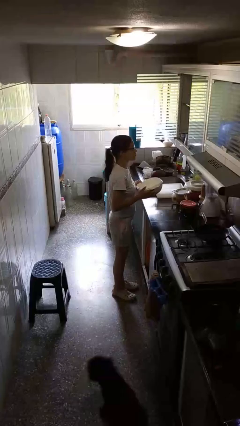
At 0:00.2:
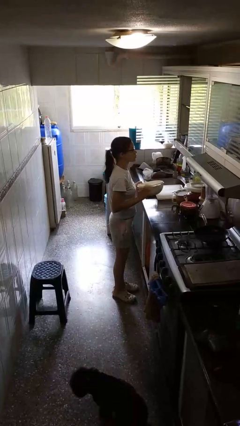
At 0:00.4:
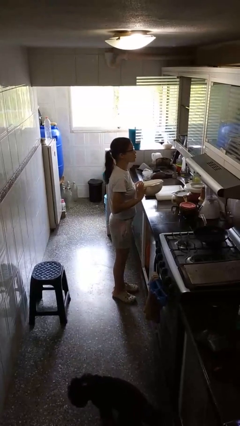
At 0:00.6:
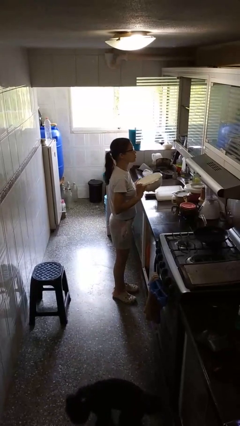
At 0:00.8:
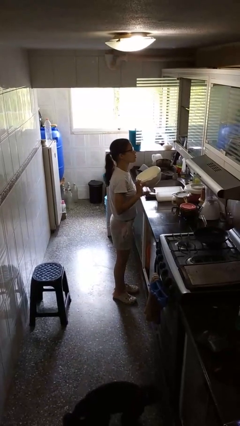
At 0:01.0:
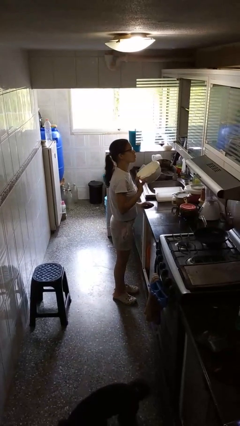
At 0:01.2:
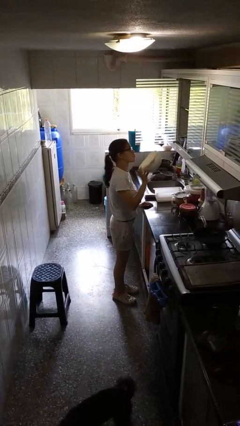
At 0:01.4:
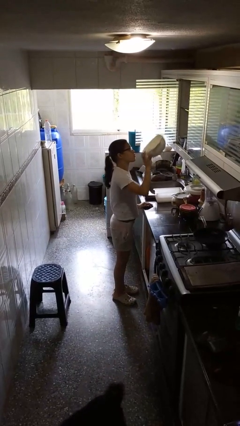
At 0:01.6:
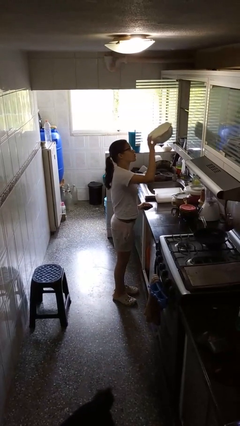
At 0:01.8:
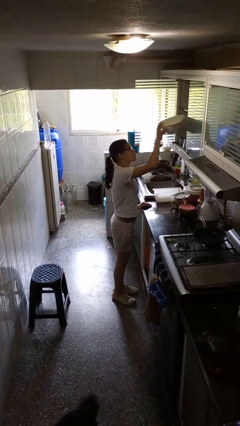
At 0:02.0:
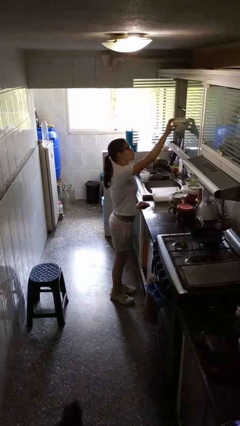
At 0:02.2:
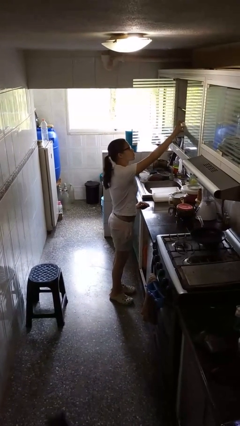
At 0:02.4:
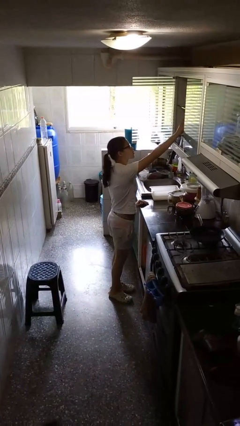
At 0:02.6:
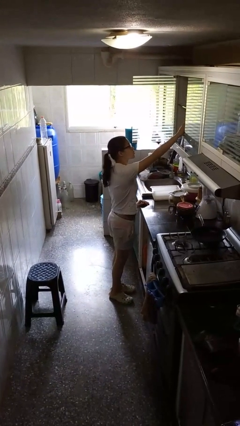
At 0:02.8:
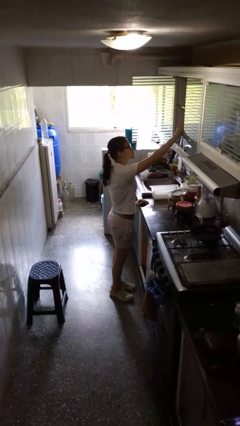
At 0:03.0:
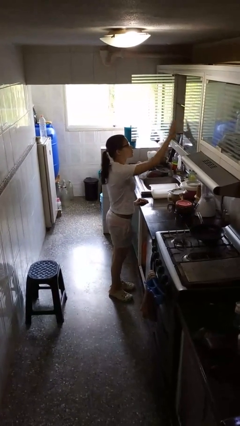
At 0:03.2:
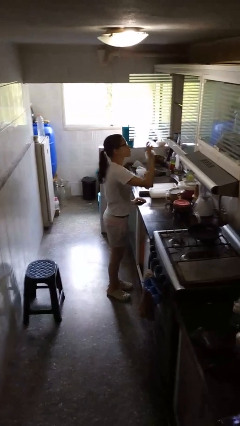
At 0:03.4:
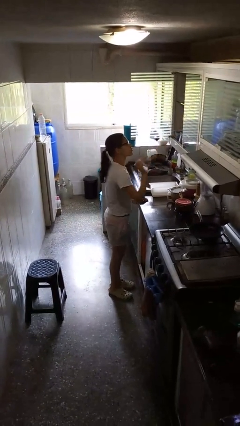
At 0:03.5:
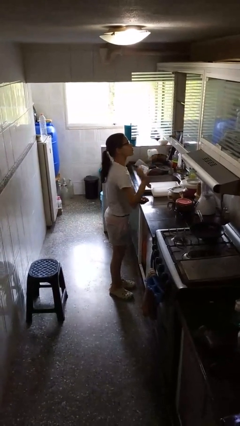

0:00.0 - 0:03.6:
person puts down object into cabinet

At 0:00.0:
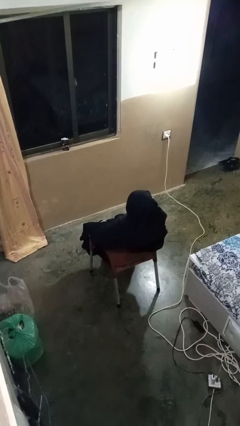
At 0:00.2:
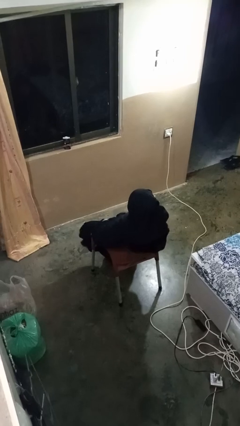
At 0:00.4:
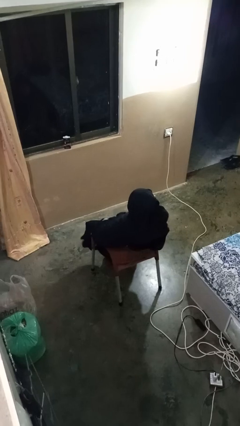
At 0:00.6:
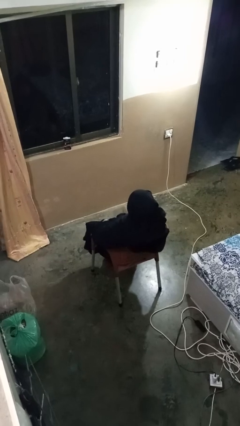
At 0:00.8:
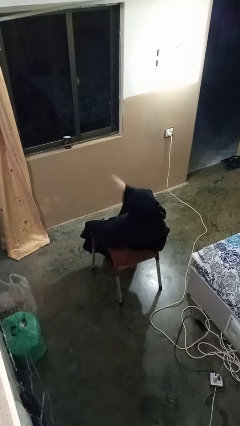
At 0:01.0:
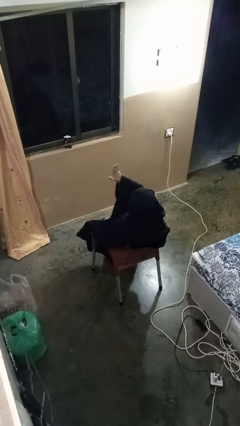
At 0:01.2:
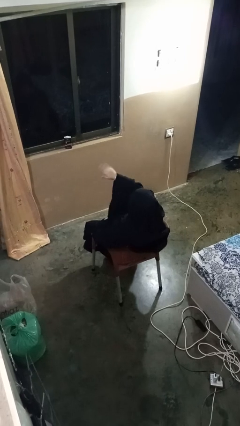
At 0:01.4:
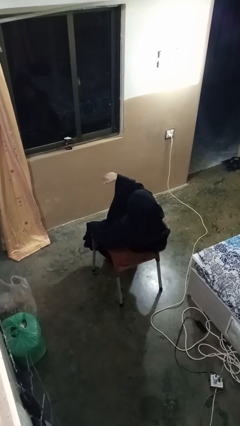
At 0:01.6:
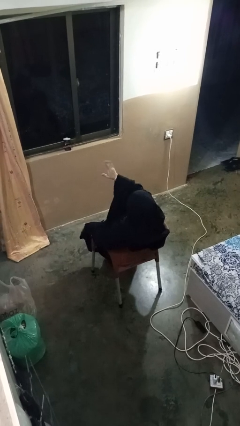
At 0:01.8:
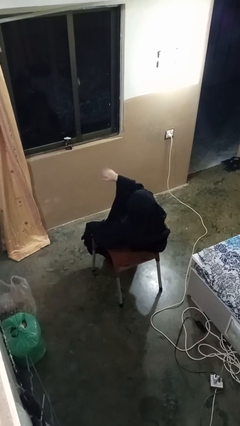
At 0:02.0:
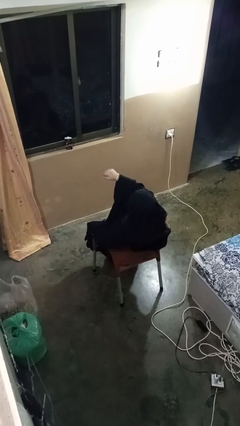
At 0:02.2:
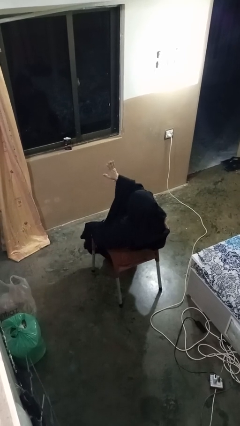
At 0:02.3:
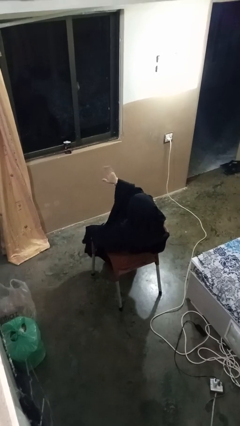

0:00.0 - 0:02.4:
person gestures come here

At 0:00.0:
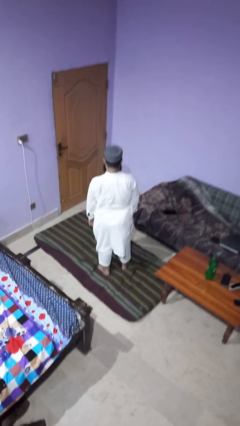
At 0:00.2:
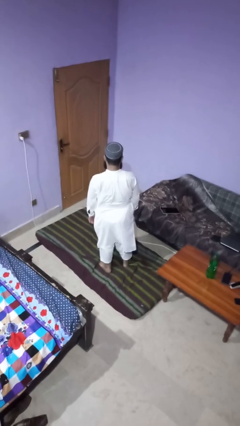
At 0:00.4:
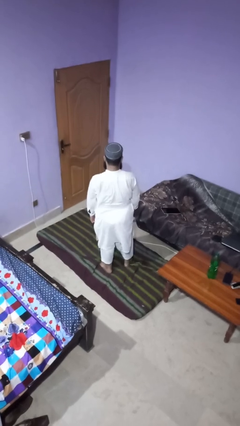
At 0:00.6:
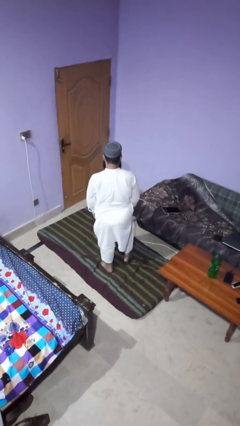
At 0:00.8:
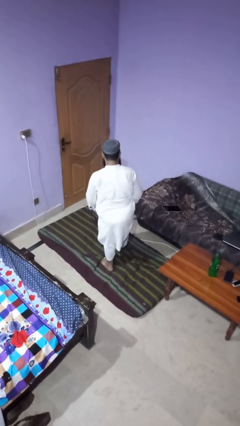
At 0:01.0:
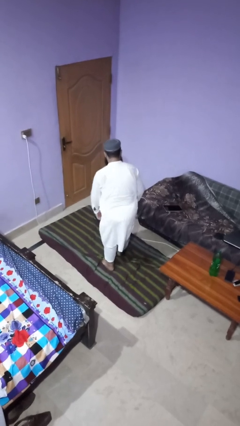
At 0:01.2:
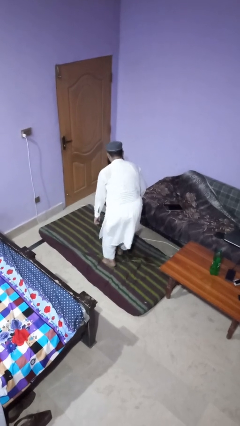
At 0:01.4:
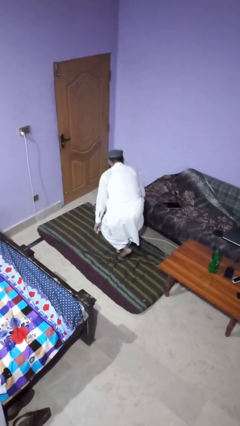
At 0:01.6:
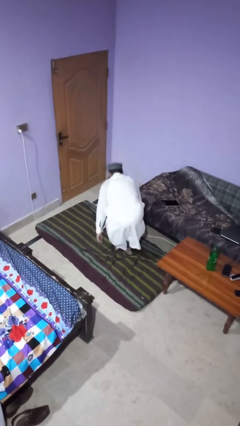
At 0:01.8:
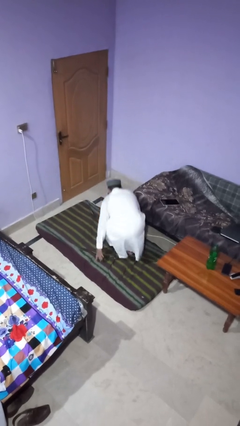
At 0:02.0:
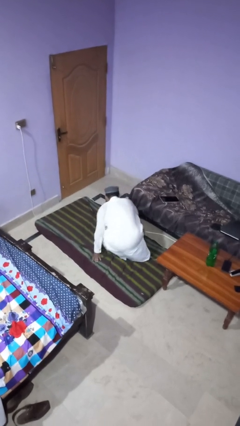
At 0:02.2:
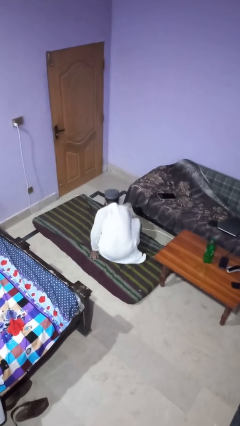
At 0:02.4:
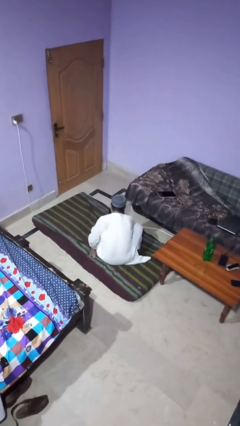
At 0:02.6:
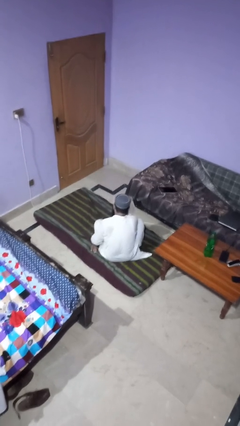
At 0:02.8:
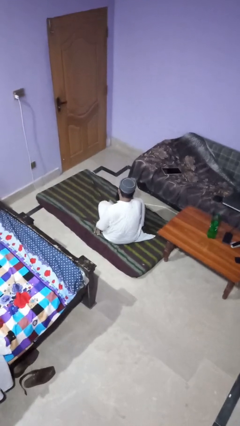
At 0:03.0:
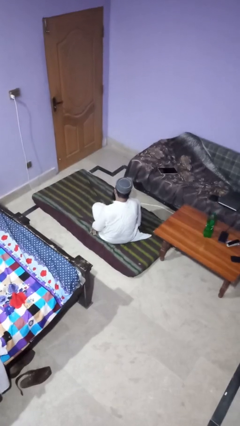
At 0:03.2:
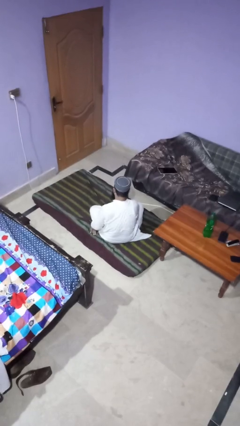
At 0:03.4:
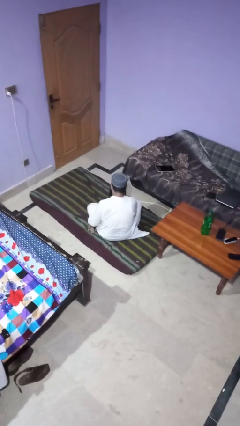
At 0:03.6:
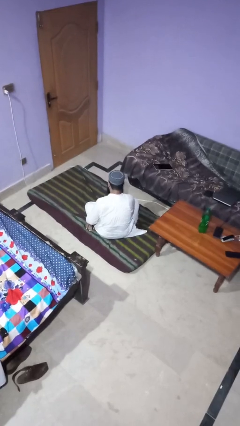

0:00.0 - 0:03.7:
person sits crisscross

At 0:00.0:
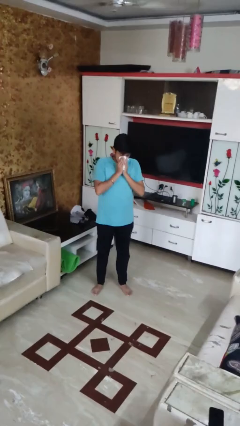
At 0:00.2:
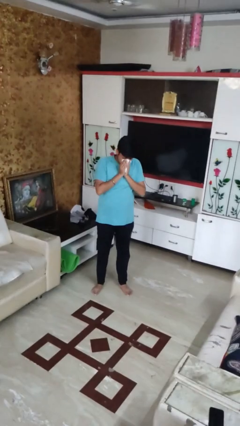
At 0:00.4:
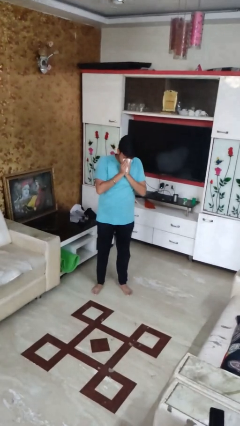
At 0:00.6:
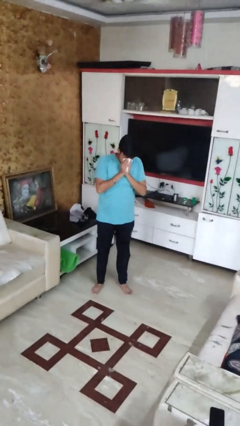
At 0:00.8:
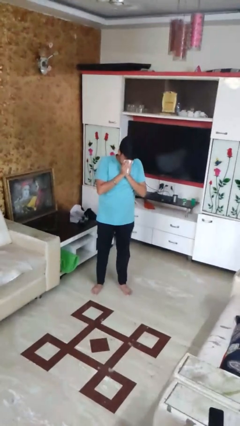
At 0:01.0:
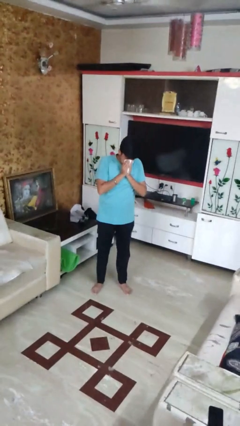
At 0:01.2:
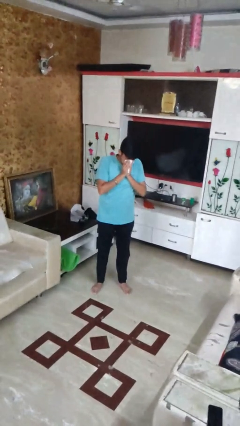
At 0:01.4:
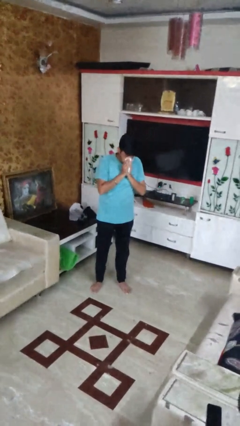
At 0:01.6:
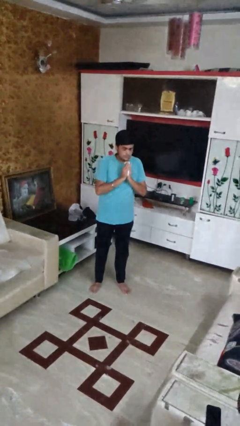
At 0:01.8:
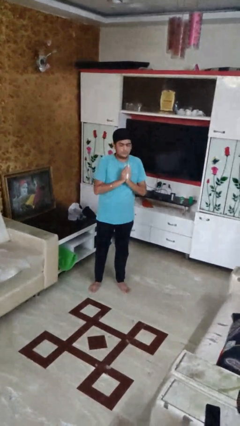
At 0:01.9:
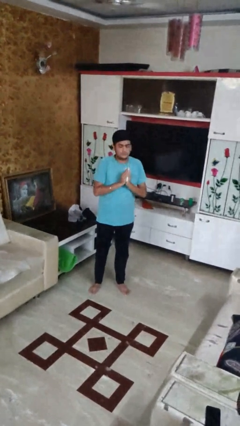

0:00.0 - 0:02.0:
person blows nose

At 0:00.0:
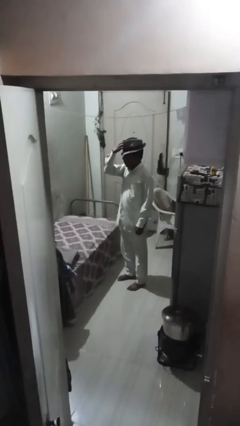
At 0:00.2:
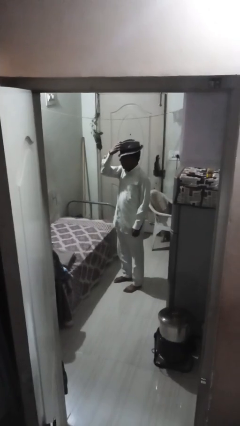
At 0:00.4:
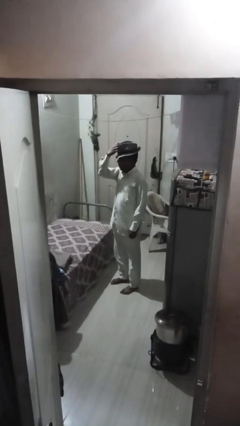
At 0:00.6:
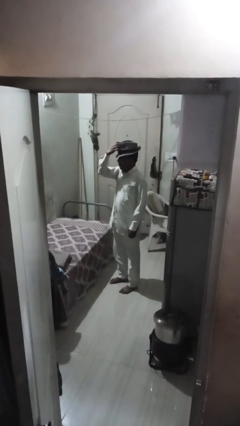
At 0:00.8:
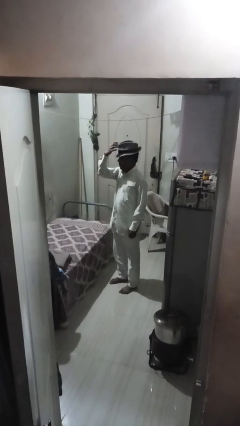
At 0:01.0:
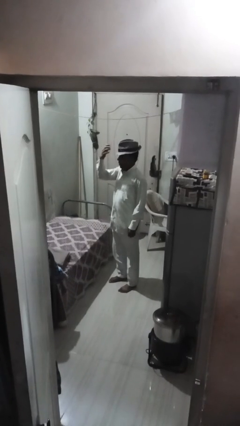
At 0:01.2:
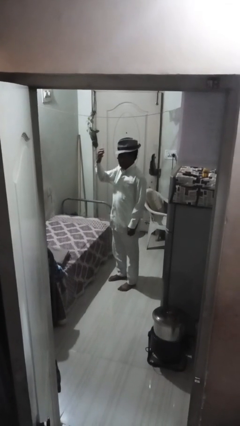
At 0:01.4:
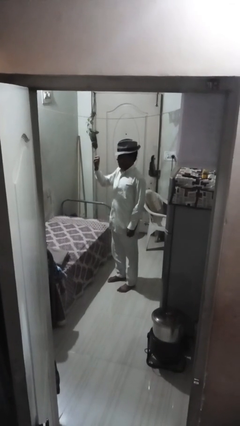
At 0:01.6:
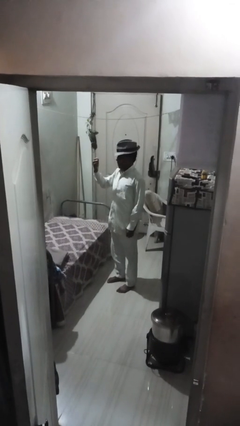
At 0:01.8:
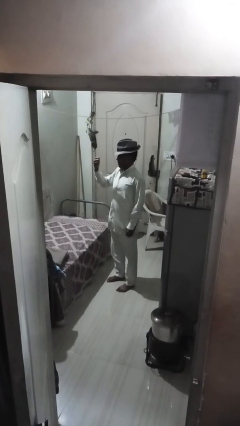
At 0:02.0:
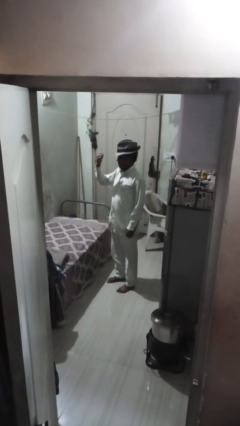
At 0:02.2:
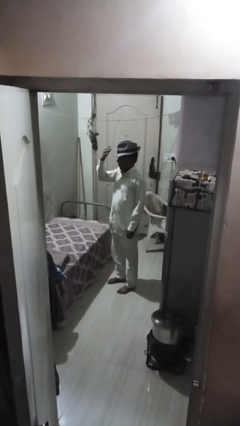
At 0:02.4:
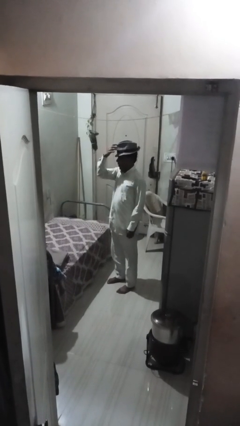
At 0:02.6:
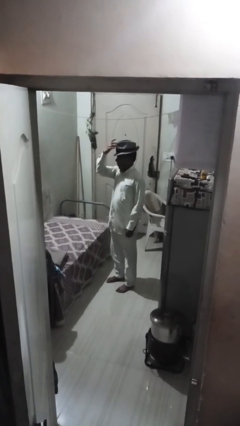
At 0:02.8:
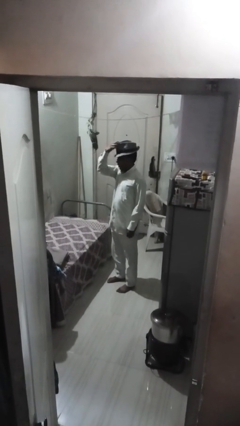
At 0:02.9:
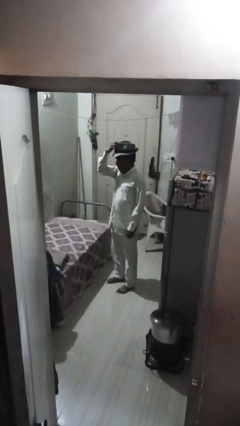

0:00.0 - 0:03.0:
person puts on hat

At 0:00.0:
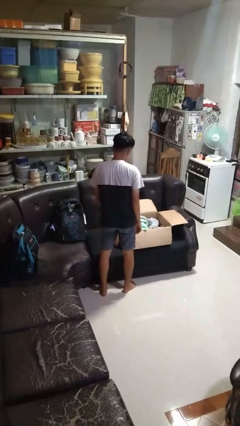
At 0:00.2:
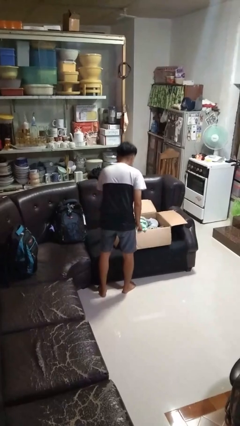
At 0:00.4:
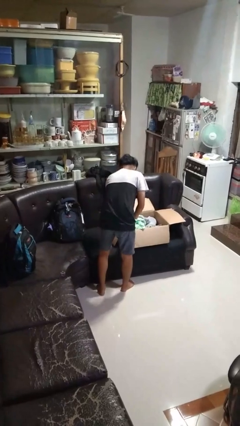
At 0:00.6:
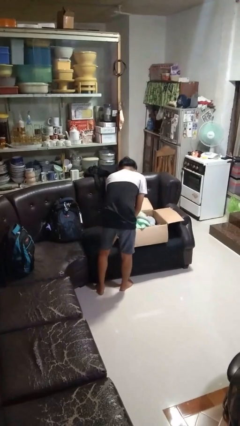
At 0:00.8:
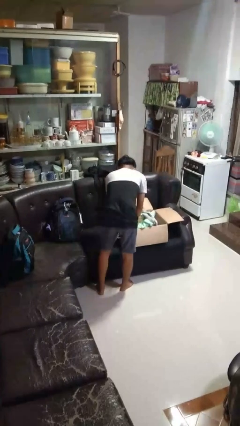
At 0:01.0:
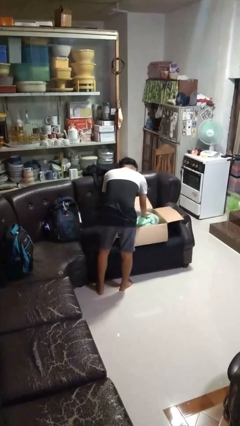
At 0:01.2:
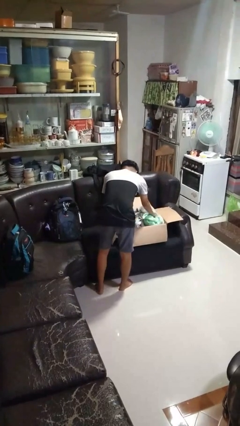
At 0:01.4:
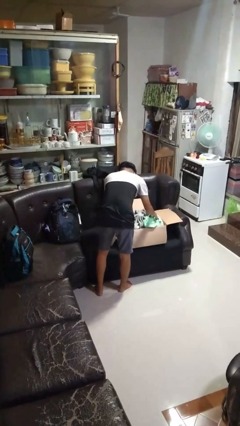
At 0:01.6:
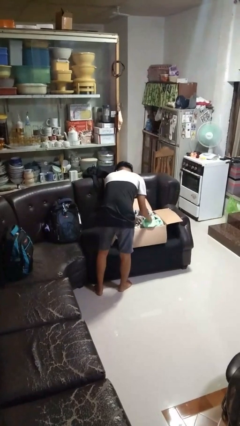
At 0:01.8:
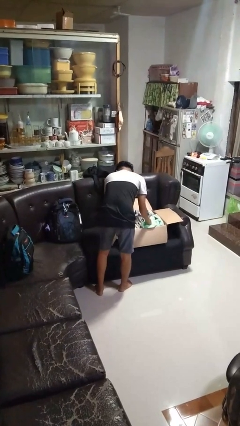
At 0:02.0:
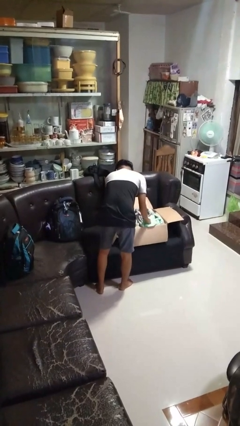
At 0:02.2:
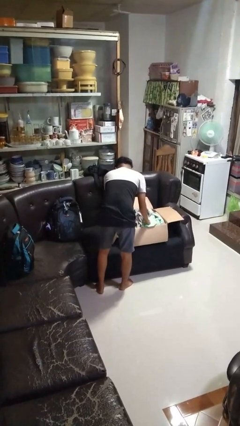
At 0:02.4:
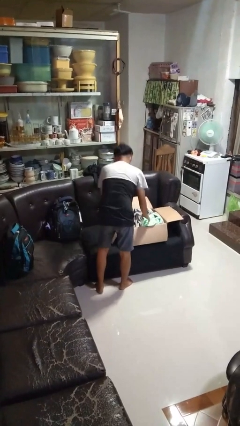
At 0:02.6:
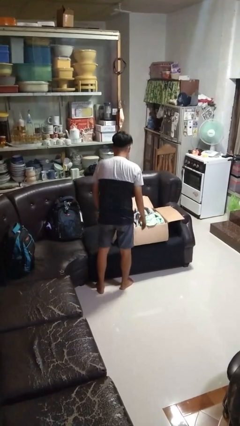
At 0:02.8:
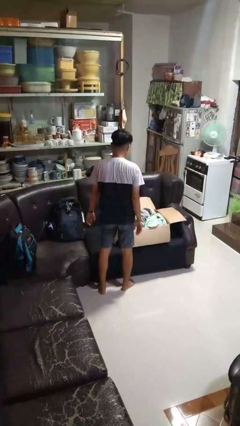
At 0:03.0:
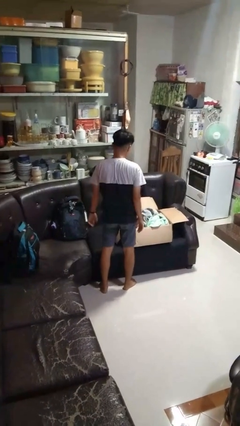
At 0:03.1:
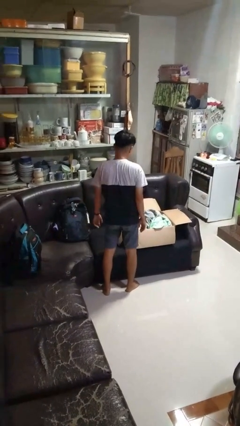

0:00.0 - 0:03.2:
person searches in box
